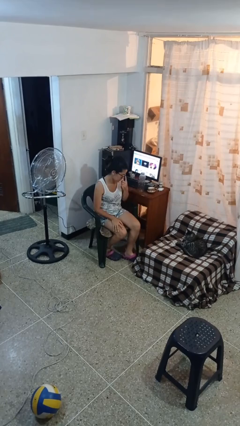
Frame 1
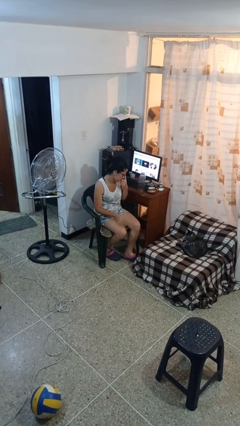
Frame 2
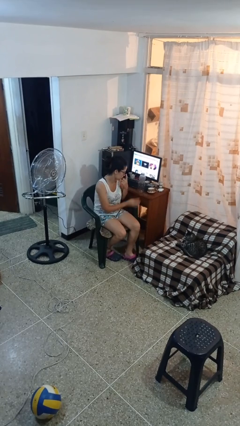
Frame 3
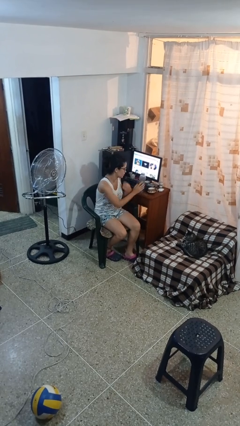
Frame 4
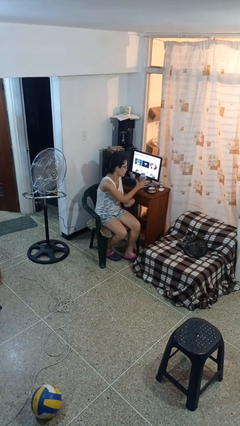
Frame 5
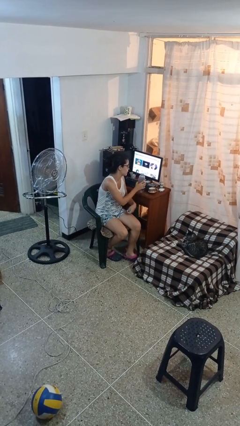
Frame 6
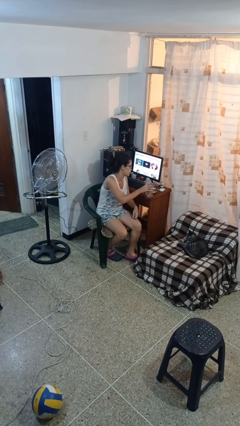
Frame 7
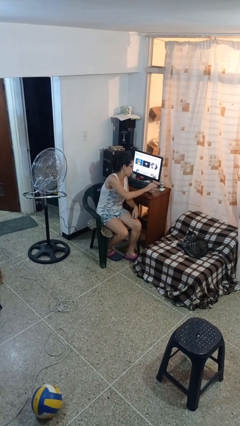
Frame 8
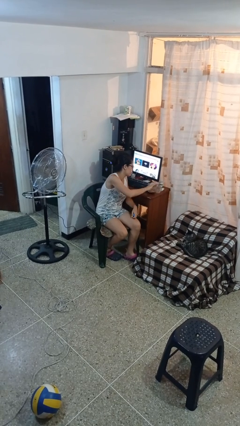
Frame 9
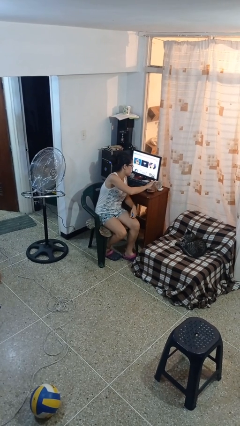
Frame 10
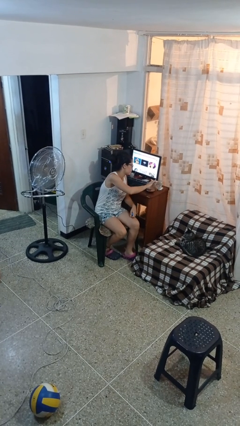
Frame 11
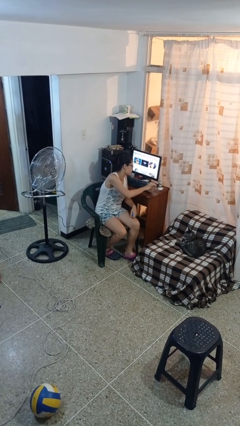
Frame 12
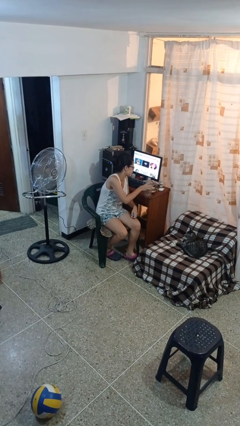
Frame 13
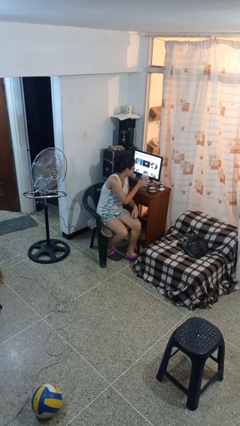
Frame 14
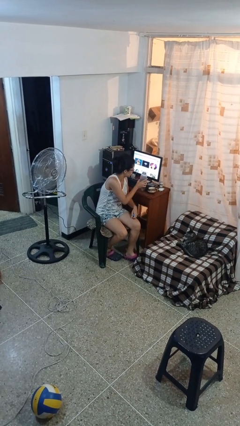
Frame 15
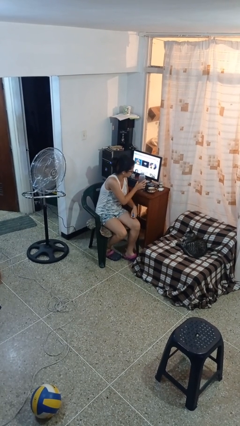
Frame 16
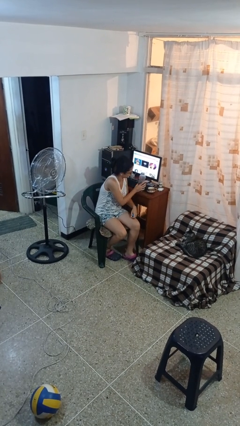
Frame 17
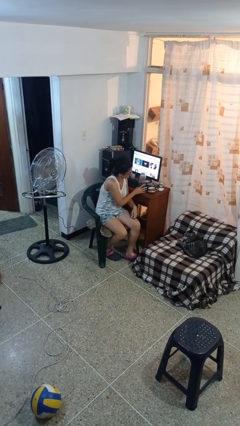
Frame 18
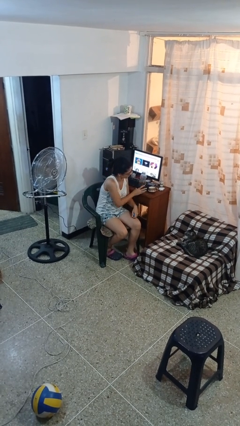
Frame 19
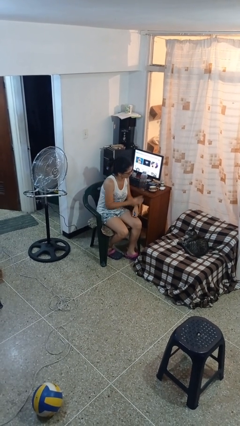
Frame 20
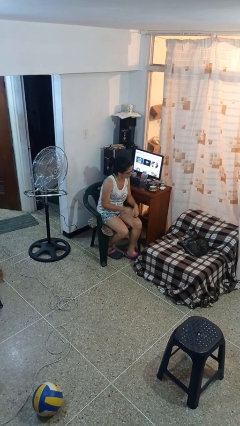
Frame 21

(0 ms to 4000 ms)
person pours liquid into cup

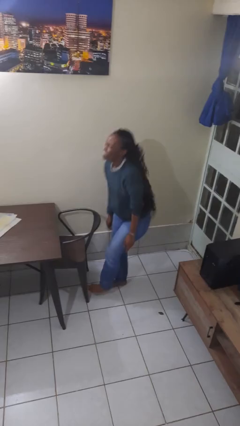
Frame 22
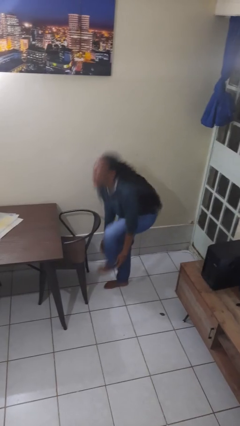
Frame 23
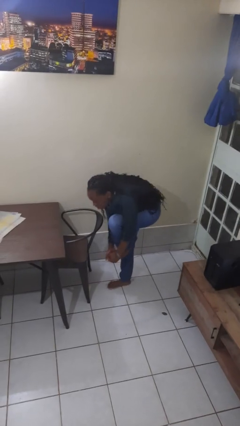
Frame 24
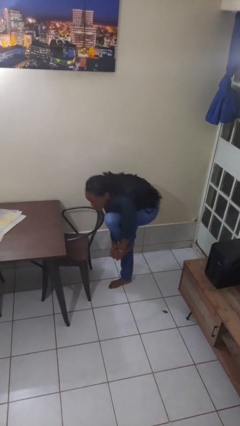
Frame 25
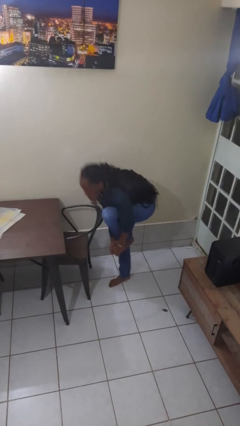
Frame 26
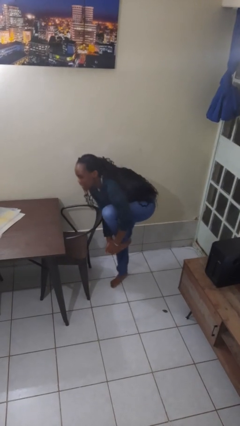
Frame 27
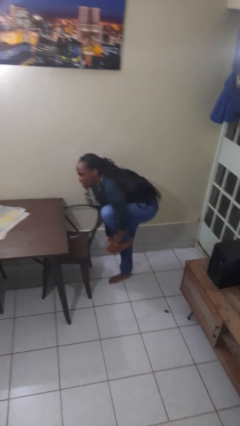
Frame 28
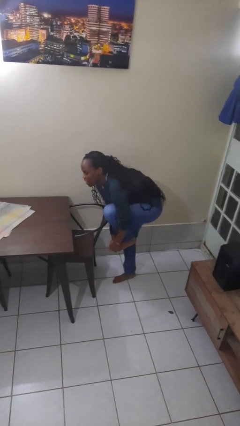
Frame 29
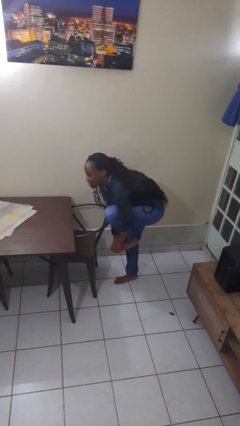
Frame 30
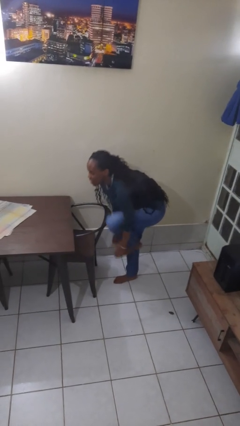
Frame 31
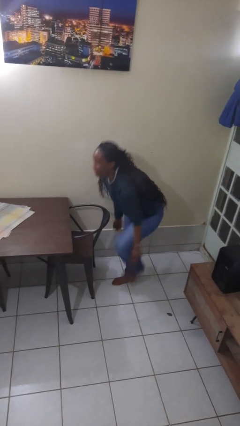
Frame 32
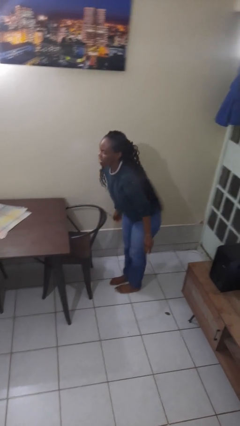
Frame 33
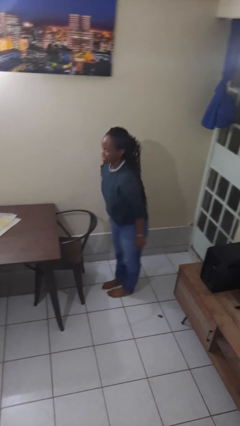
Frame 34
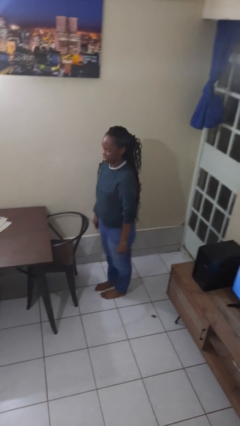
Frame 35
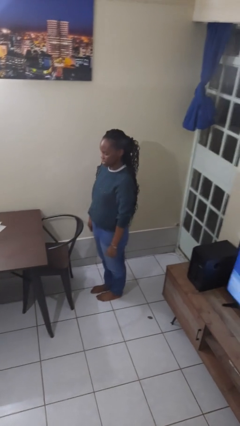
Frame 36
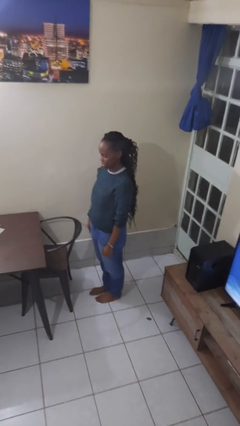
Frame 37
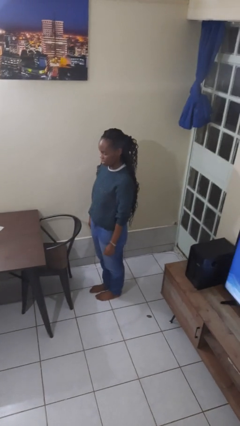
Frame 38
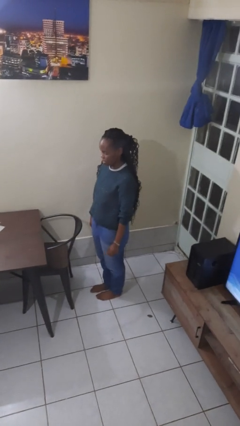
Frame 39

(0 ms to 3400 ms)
person stubs toe

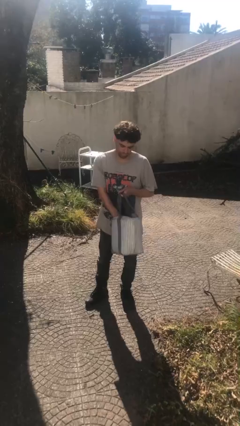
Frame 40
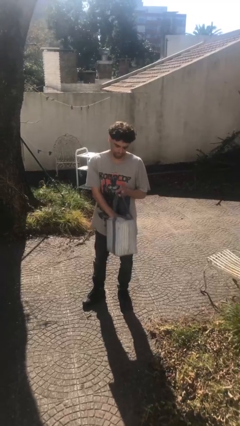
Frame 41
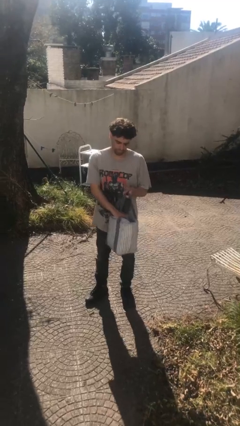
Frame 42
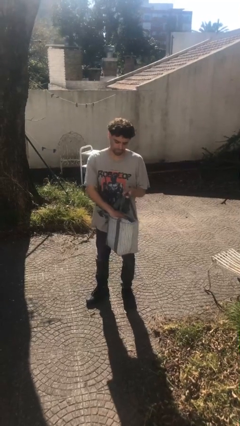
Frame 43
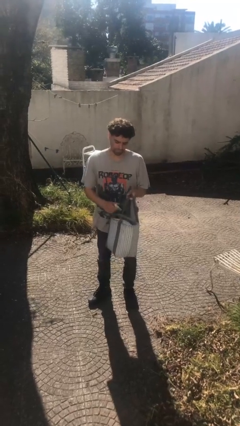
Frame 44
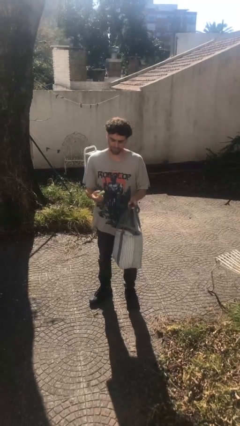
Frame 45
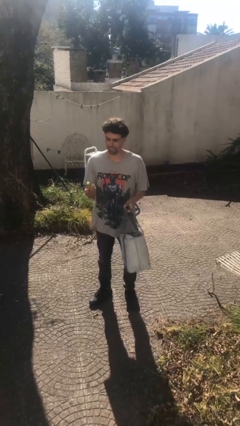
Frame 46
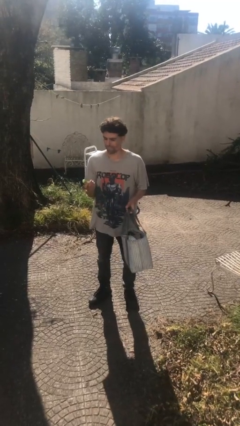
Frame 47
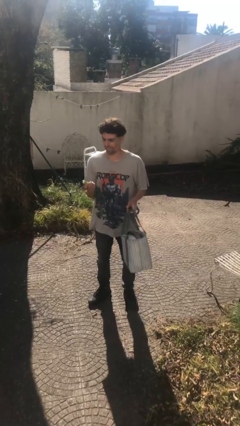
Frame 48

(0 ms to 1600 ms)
person takes object from purse

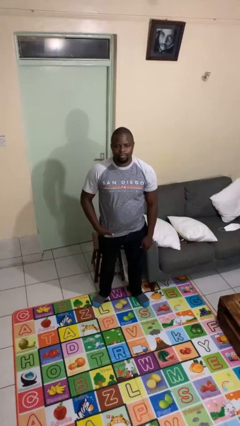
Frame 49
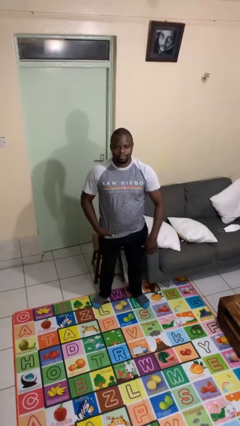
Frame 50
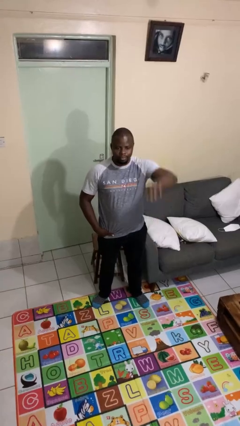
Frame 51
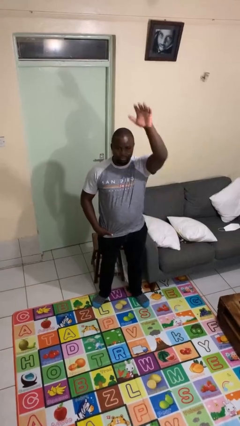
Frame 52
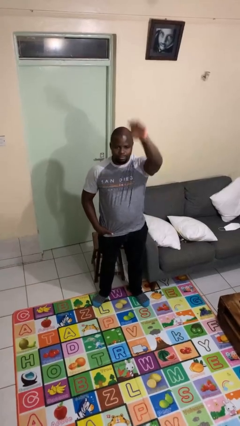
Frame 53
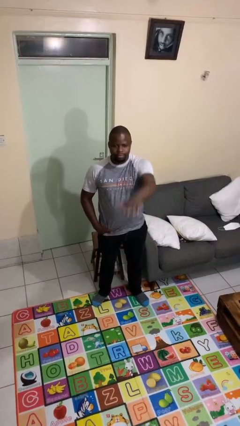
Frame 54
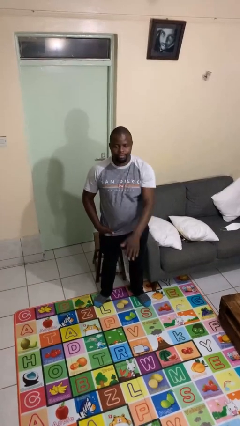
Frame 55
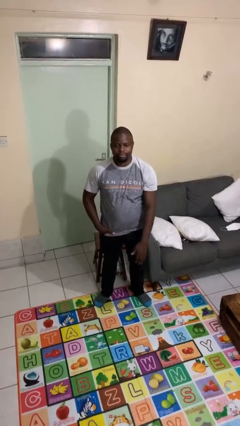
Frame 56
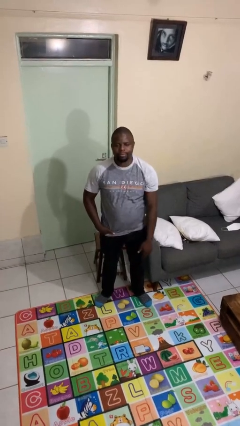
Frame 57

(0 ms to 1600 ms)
person gestures swipe down

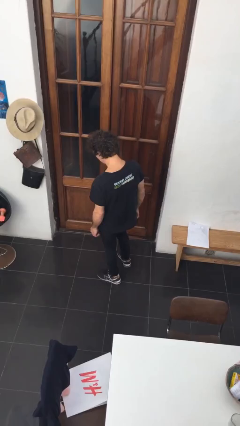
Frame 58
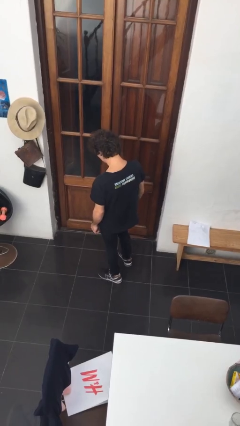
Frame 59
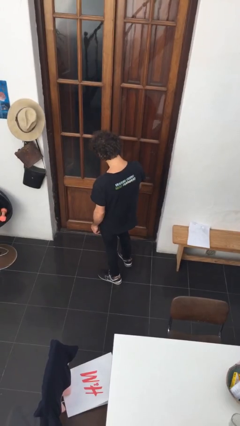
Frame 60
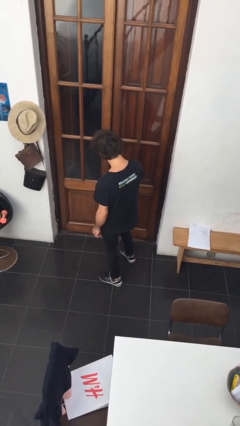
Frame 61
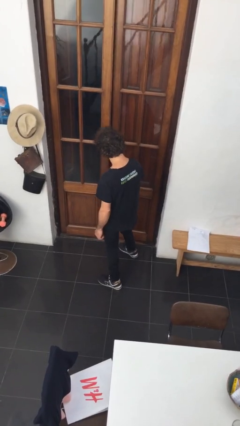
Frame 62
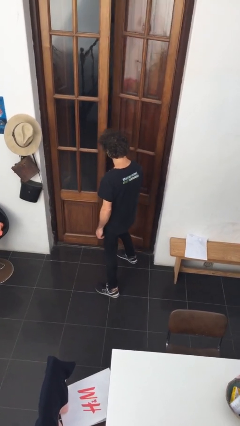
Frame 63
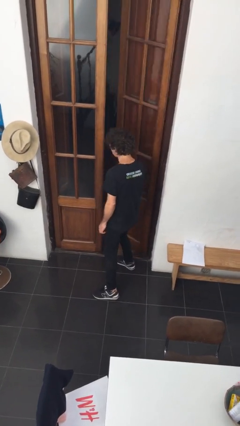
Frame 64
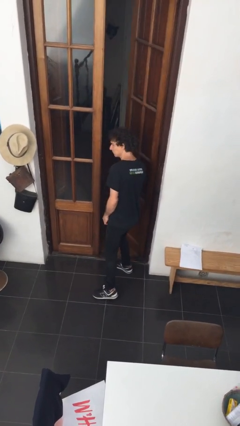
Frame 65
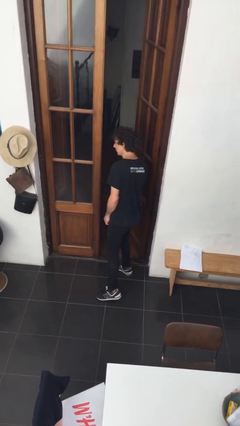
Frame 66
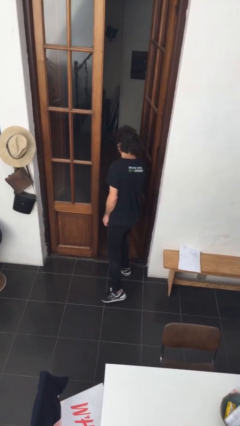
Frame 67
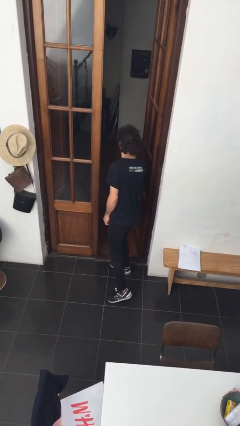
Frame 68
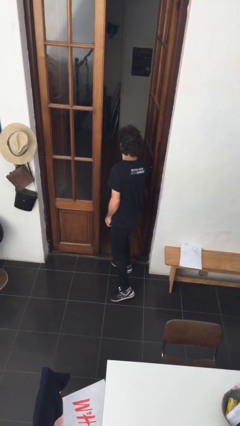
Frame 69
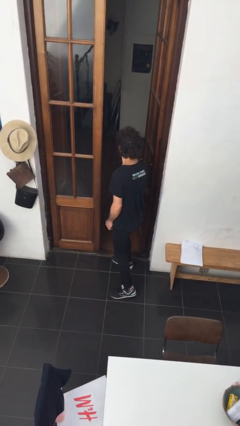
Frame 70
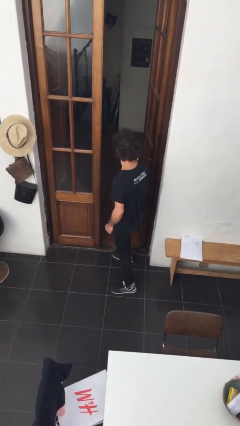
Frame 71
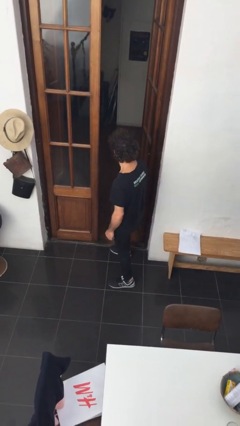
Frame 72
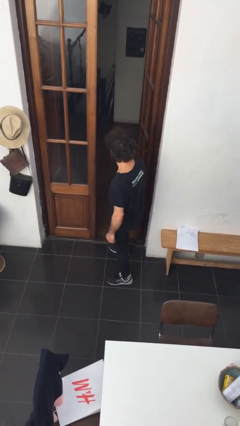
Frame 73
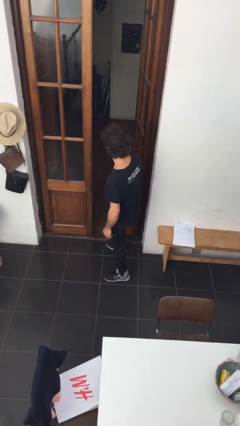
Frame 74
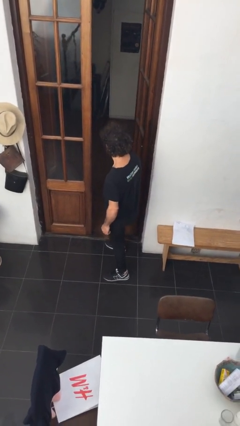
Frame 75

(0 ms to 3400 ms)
person opens facility door

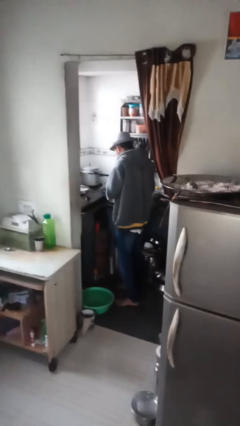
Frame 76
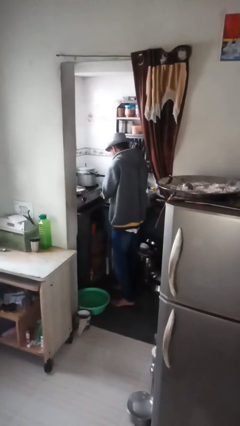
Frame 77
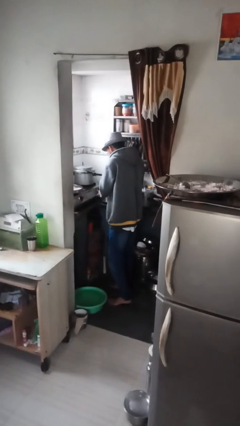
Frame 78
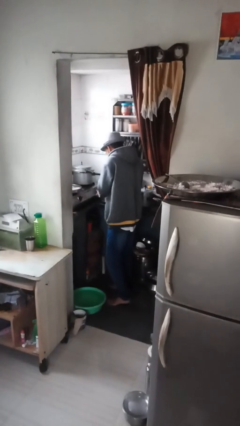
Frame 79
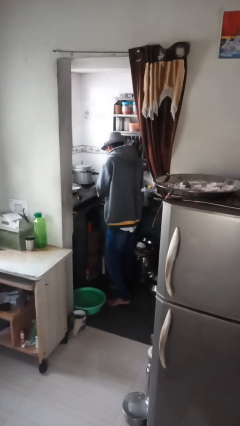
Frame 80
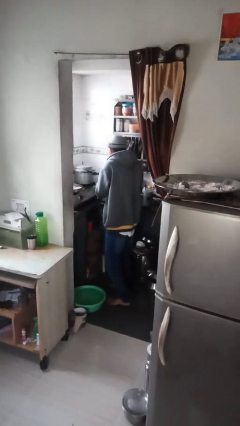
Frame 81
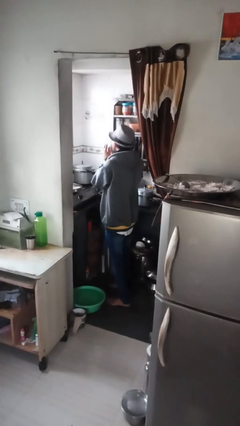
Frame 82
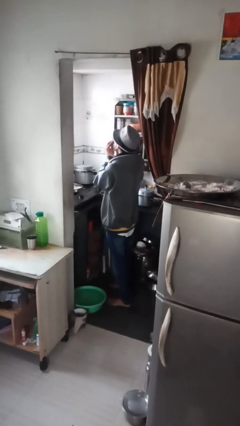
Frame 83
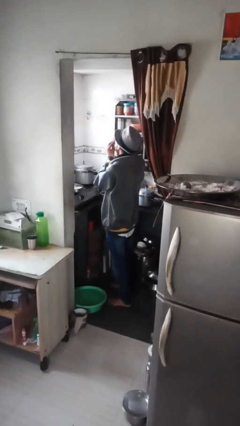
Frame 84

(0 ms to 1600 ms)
person burns hand

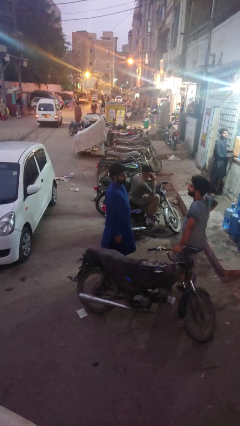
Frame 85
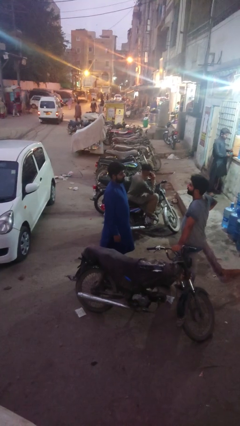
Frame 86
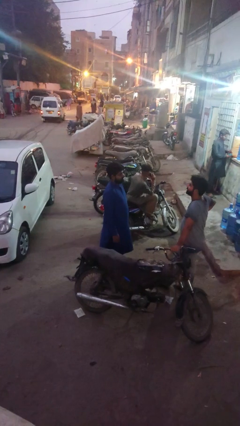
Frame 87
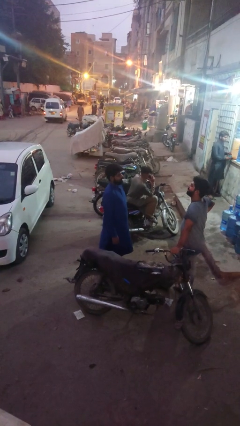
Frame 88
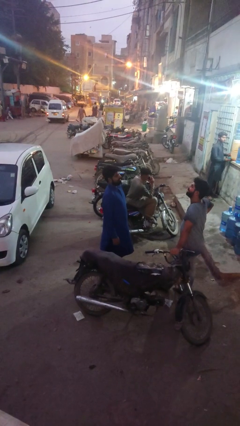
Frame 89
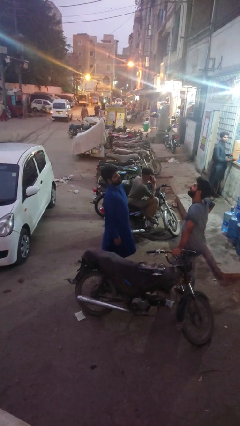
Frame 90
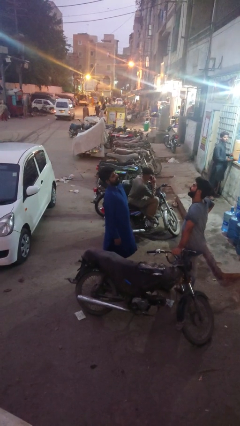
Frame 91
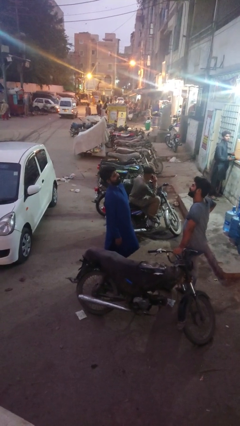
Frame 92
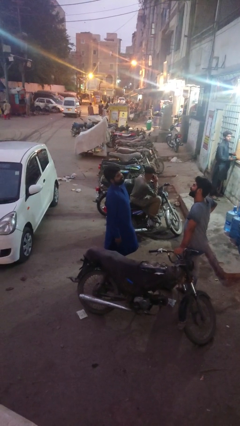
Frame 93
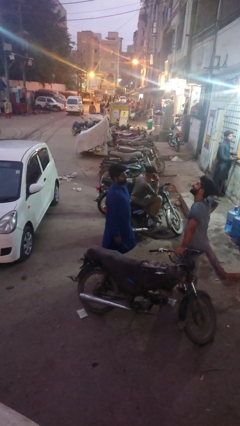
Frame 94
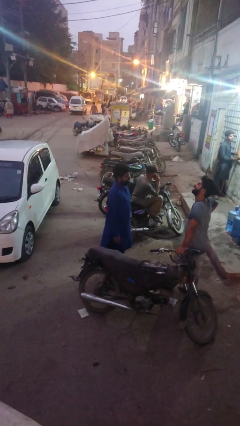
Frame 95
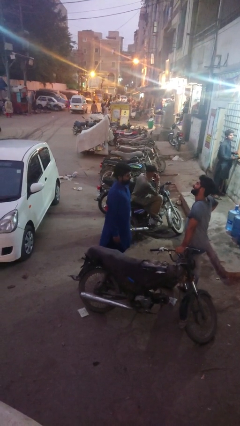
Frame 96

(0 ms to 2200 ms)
person laughs with person
